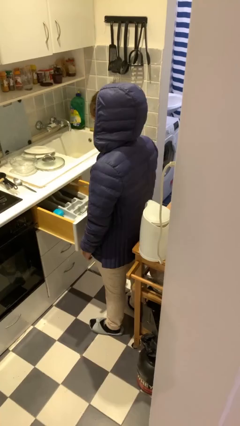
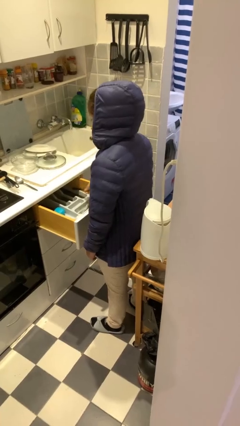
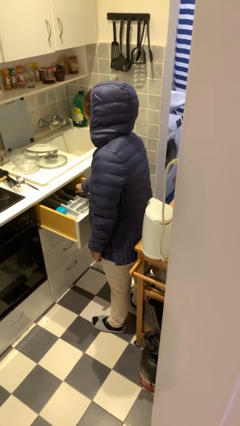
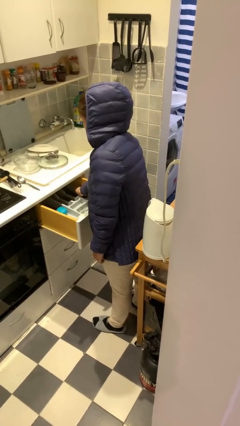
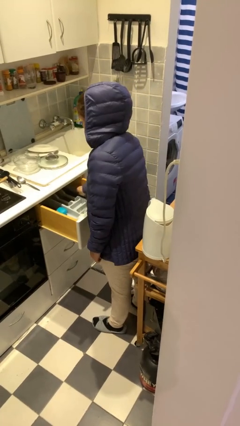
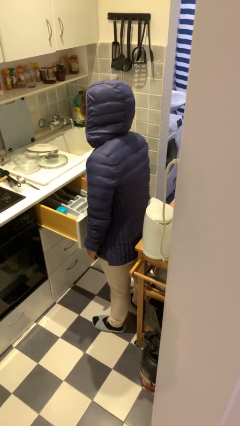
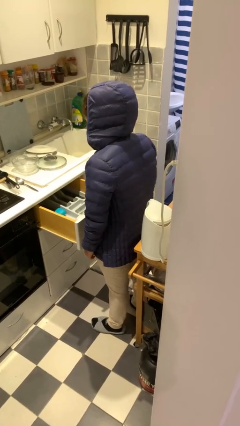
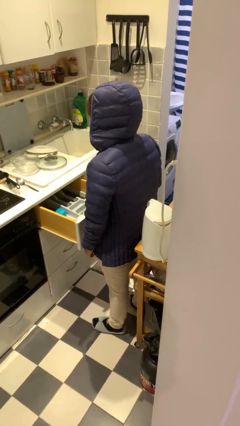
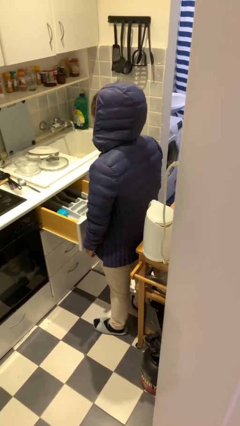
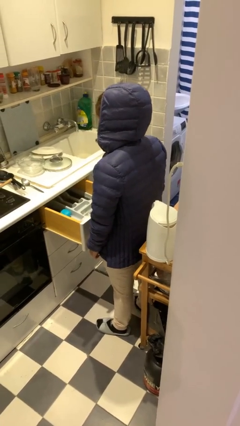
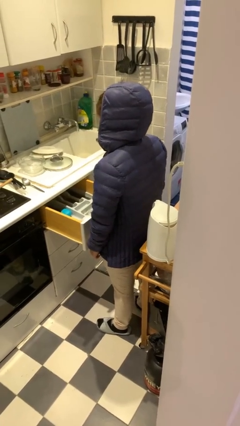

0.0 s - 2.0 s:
person puts object into kitchen drawer

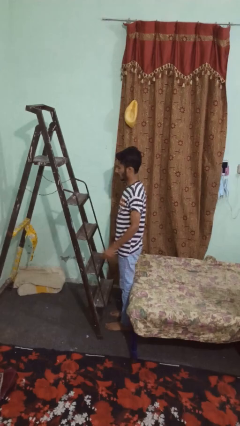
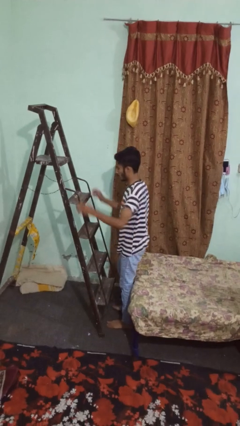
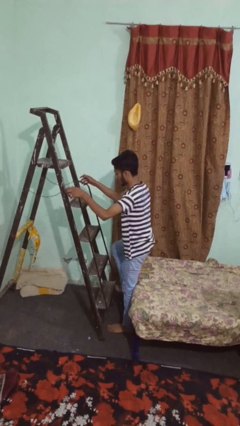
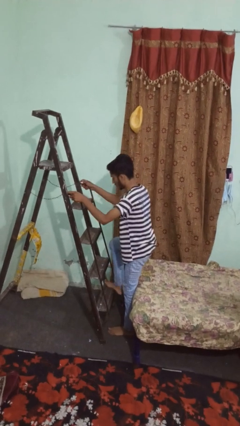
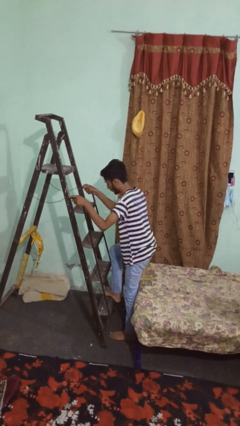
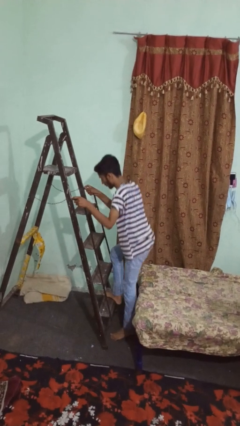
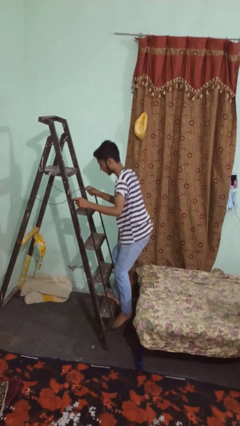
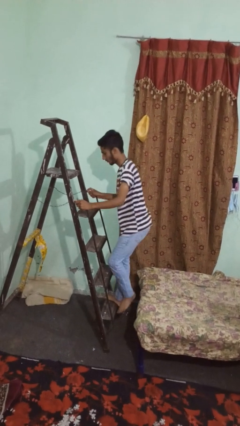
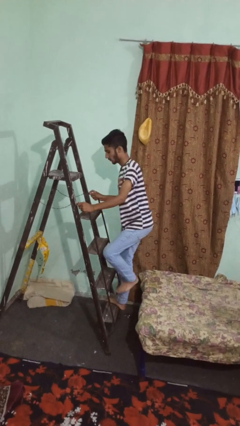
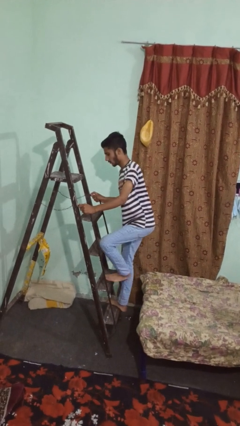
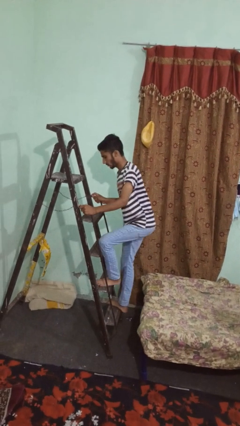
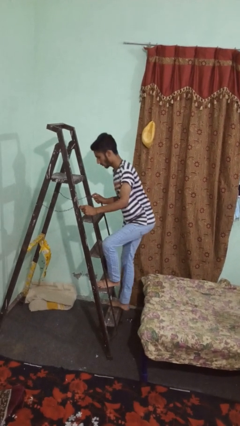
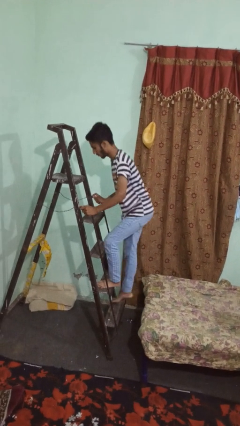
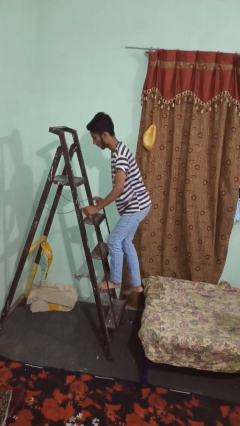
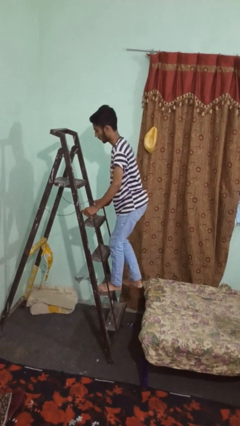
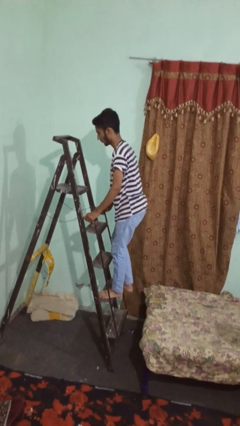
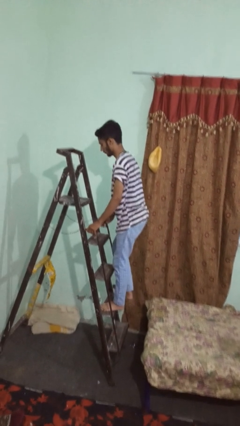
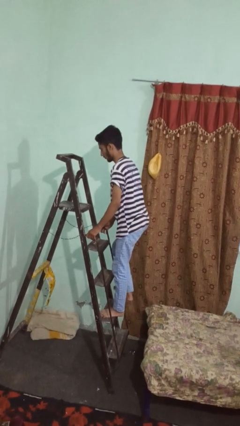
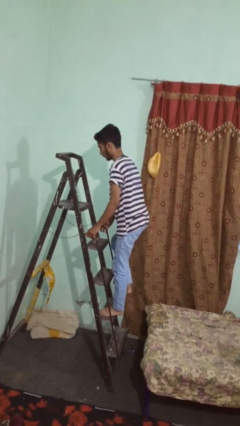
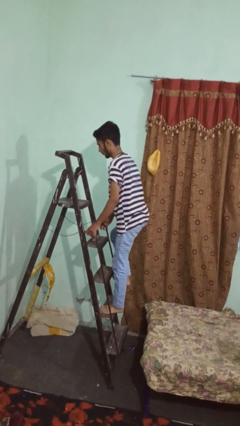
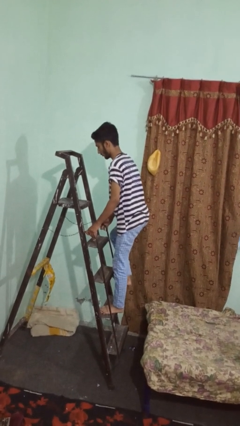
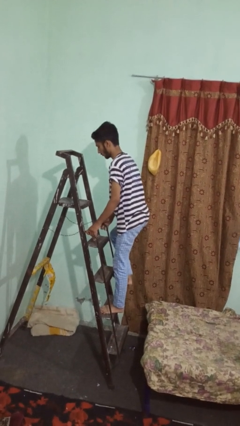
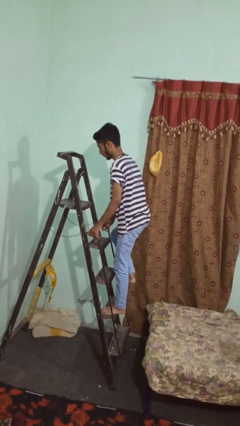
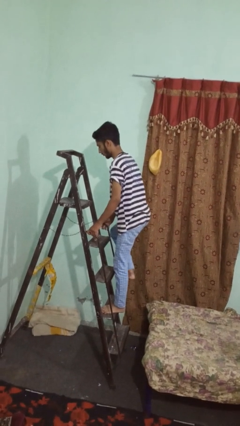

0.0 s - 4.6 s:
person climbs up ladder

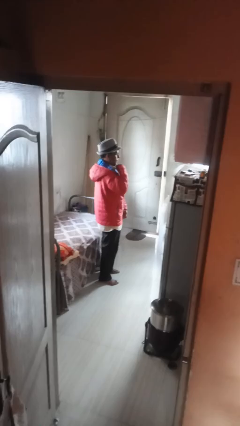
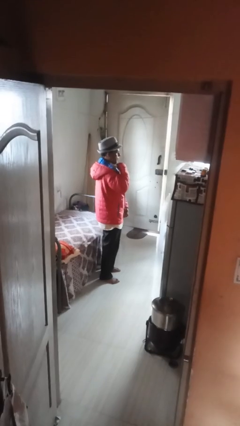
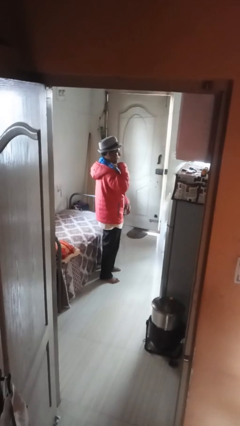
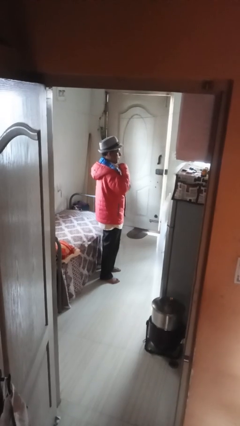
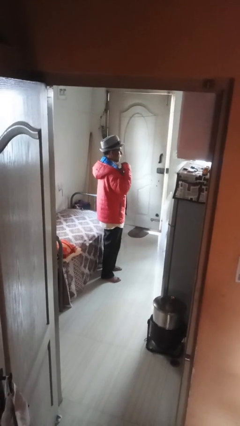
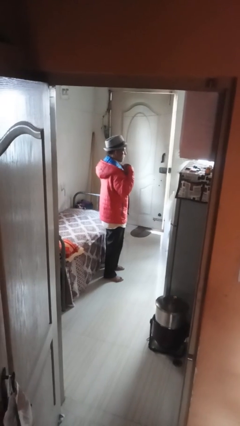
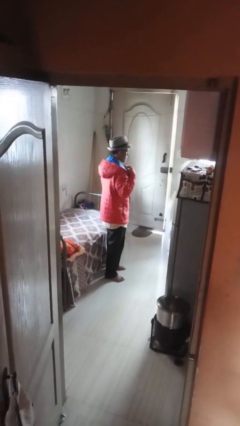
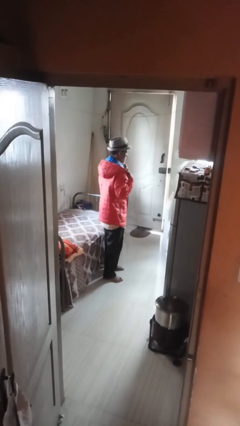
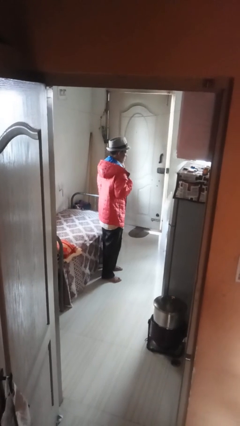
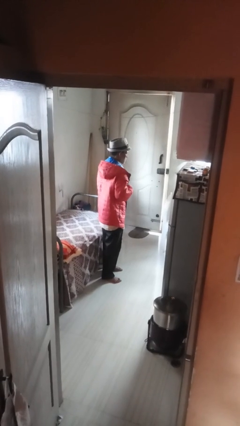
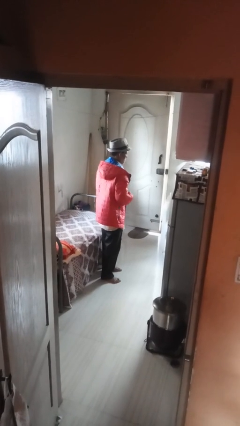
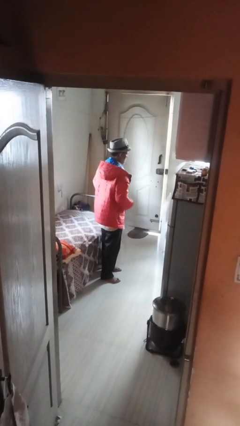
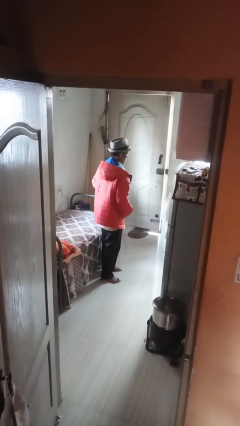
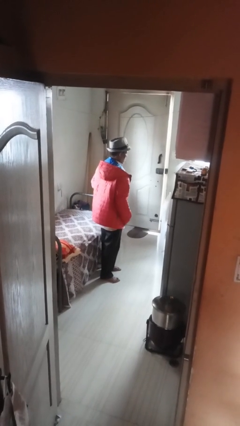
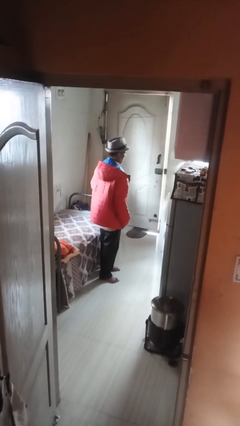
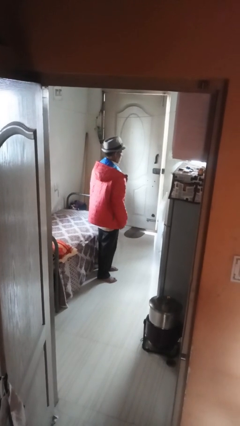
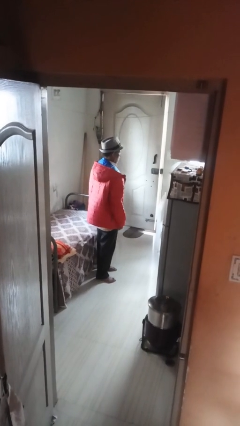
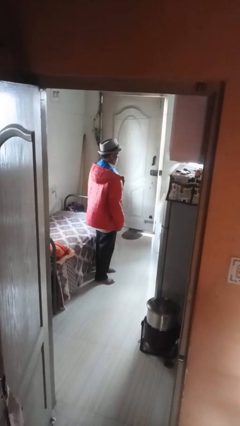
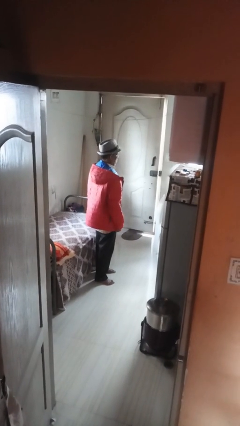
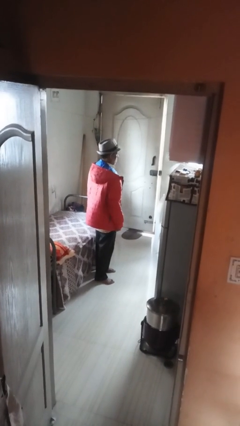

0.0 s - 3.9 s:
person unzips jacket

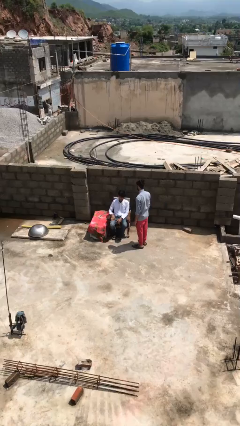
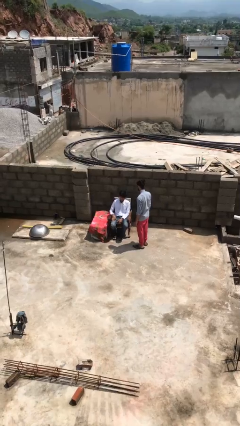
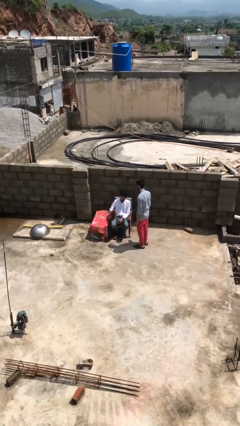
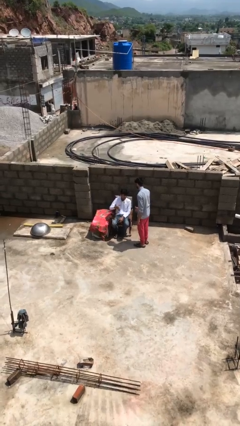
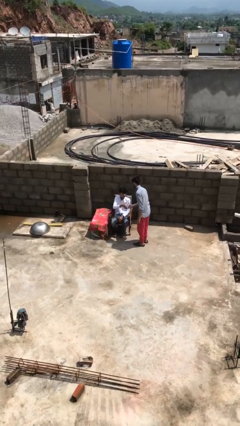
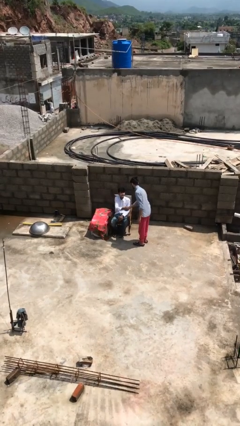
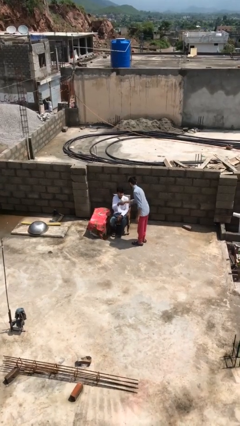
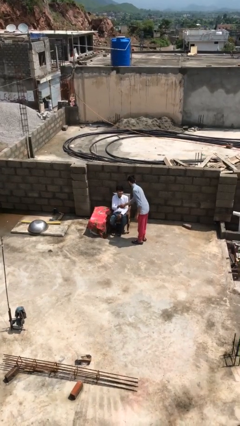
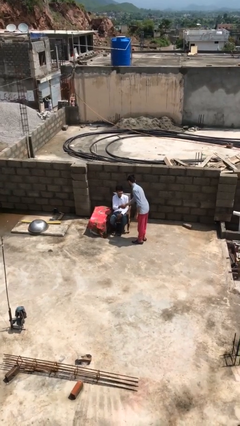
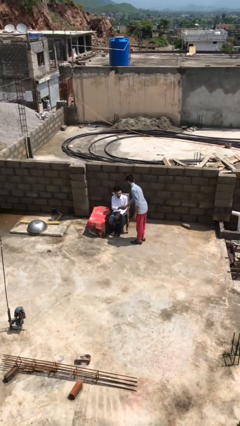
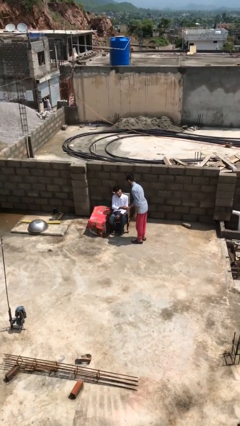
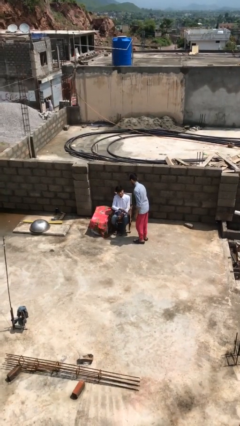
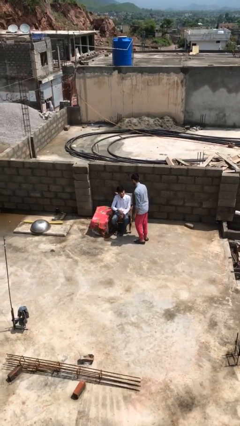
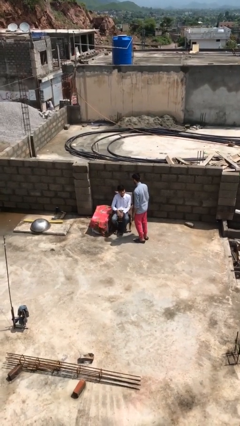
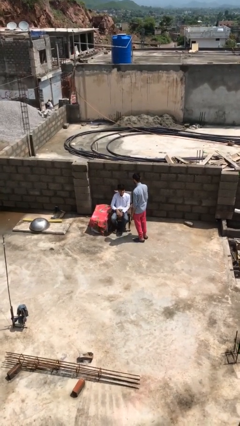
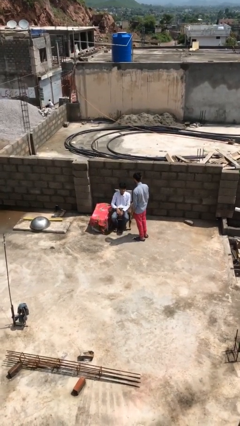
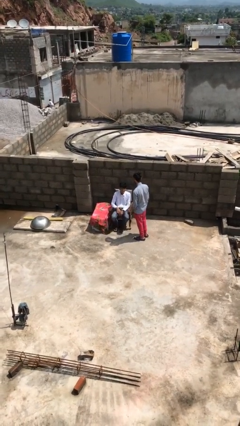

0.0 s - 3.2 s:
person shakes hand

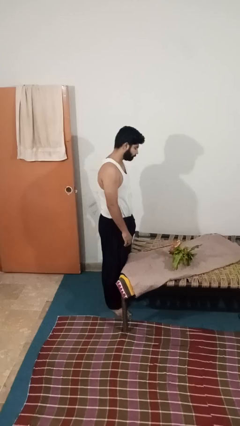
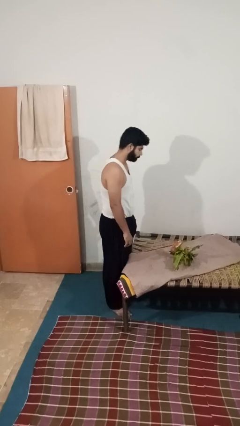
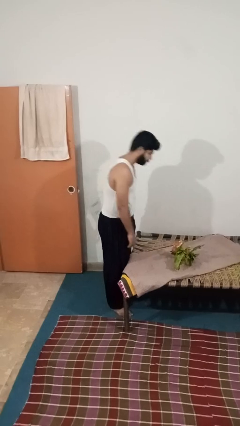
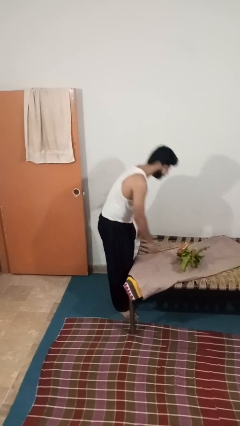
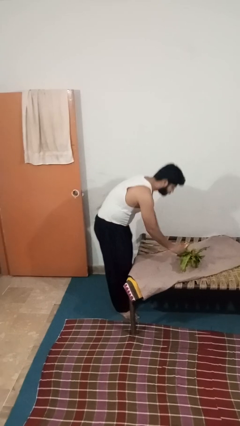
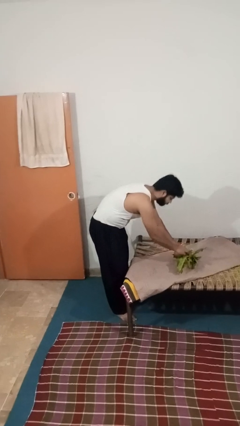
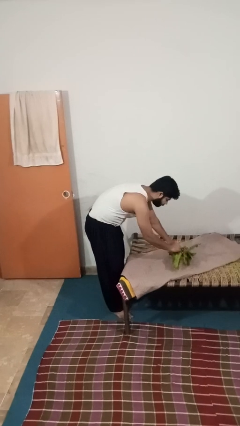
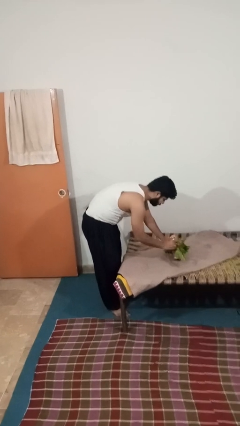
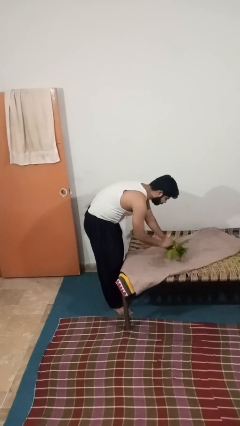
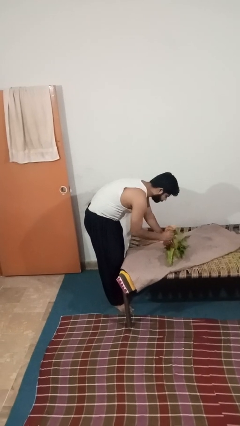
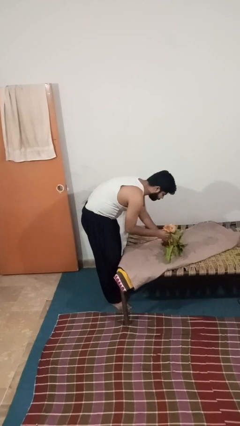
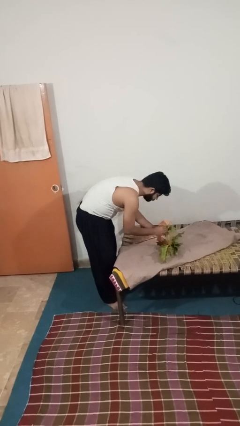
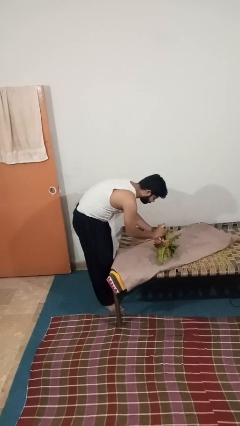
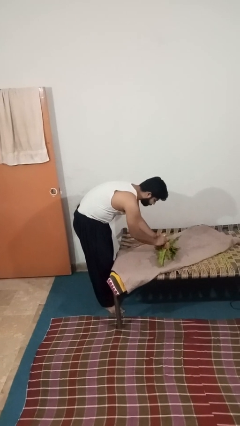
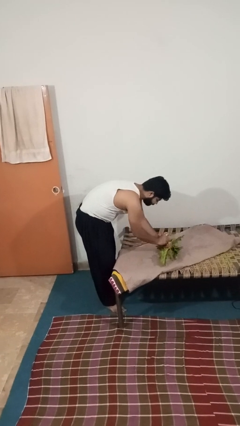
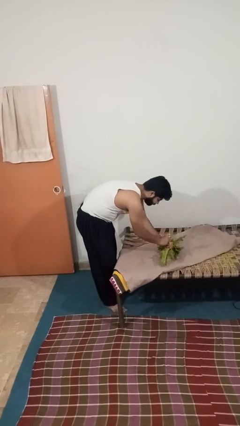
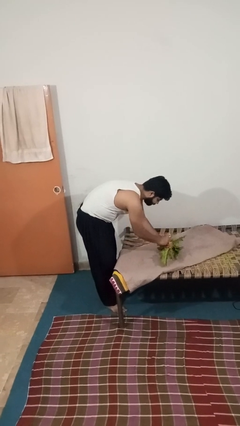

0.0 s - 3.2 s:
person climbs off chair

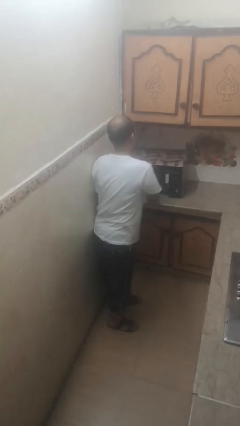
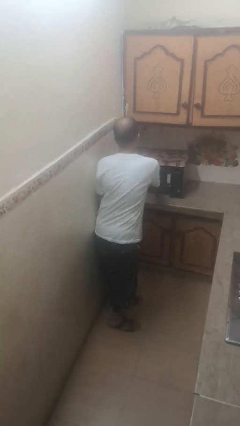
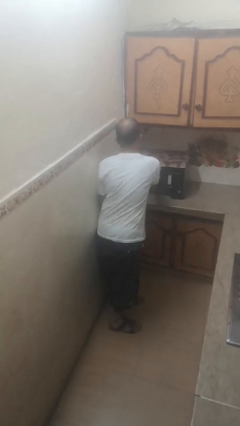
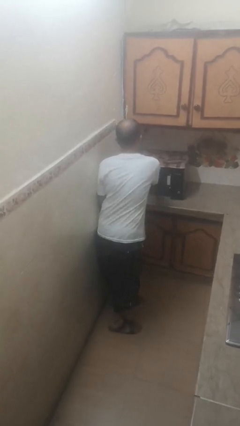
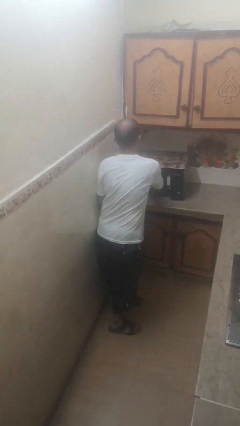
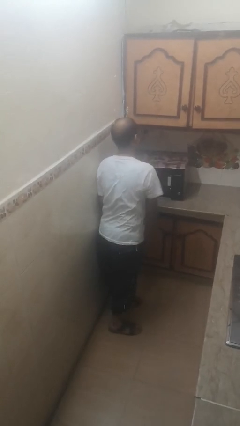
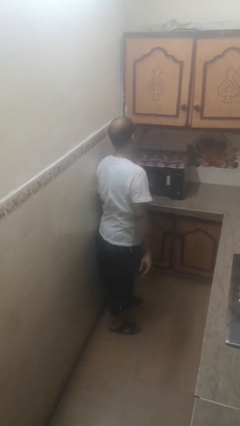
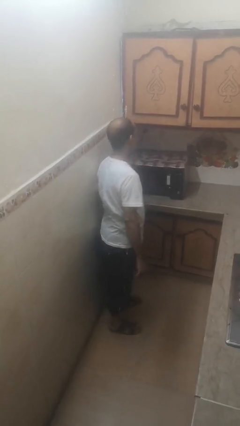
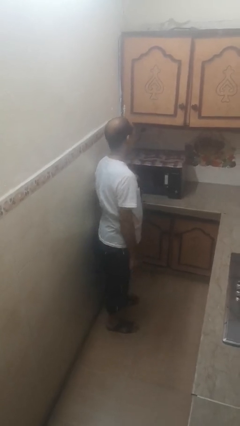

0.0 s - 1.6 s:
person puts object into microwave
